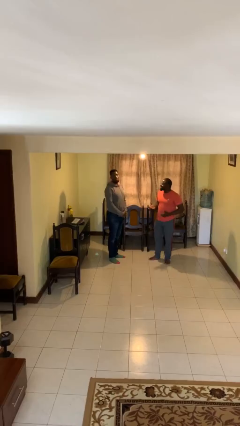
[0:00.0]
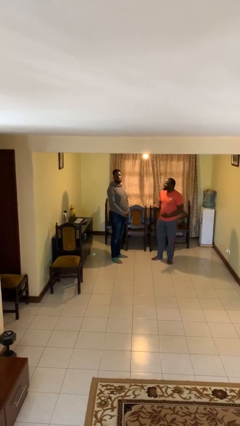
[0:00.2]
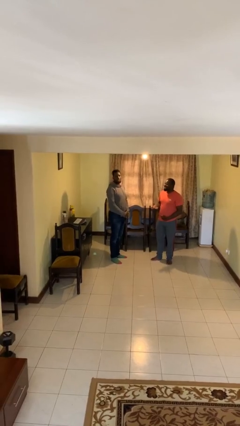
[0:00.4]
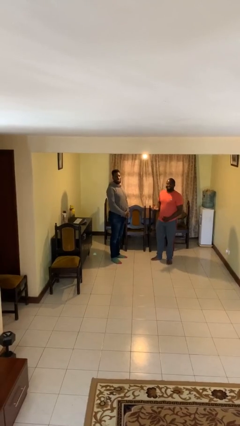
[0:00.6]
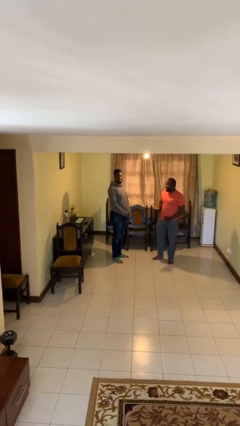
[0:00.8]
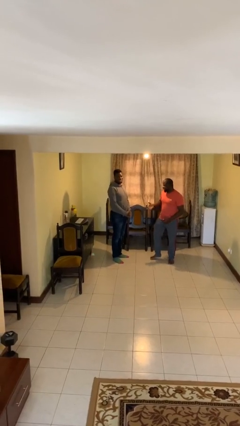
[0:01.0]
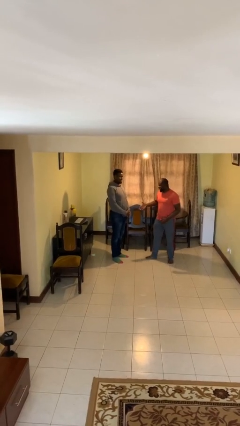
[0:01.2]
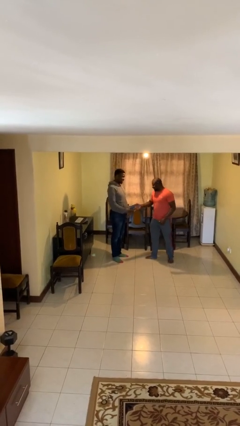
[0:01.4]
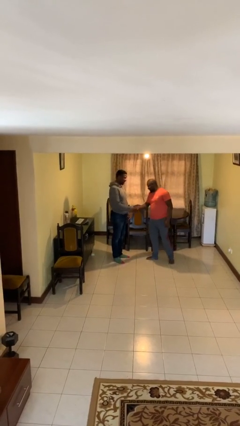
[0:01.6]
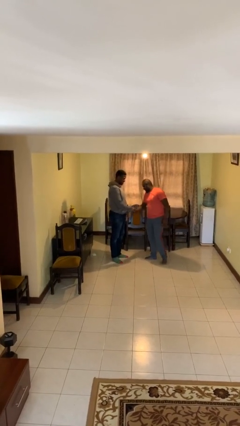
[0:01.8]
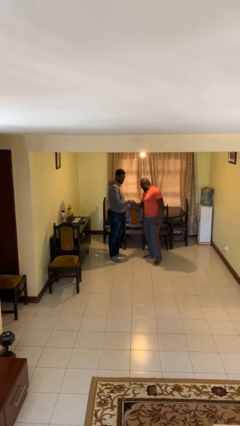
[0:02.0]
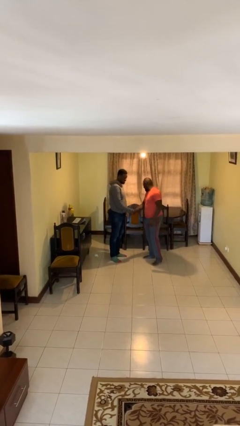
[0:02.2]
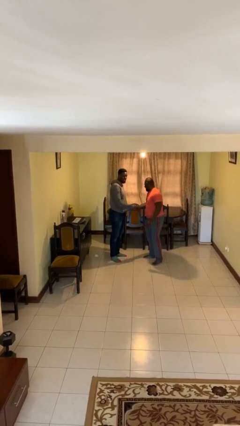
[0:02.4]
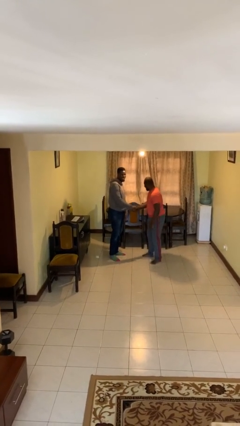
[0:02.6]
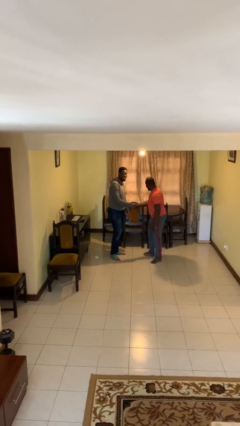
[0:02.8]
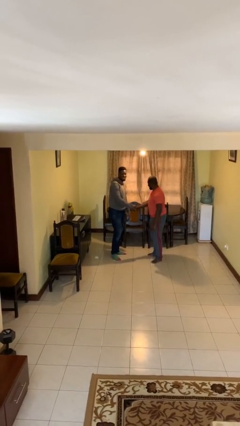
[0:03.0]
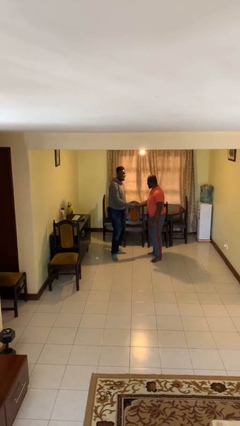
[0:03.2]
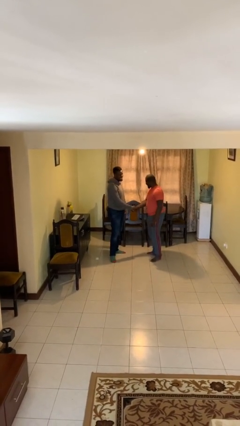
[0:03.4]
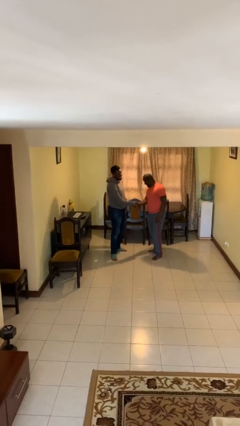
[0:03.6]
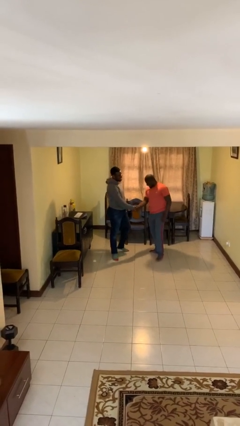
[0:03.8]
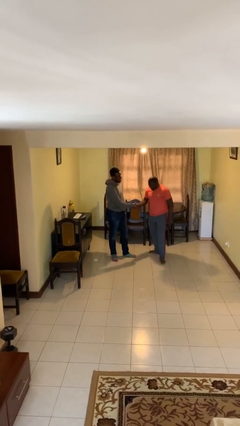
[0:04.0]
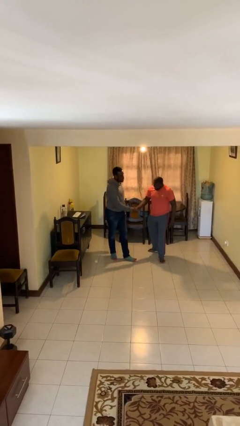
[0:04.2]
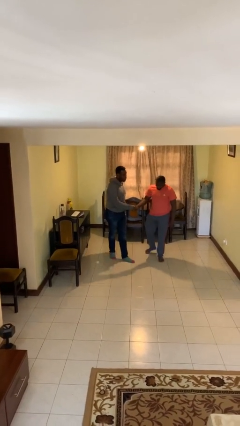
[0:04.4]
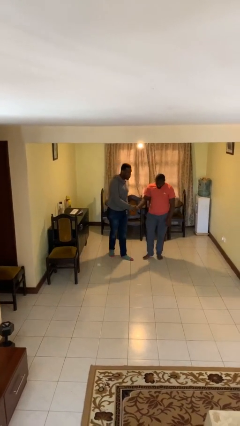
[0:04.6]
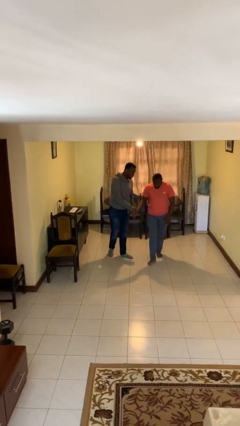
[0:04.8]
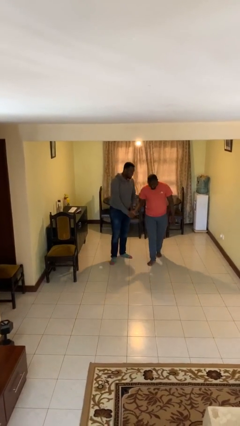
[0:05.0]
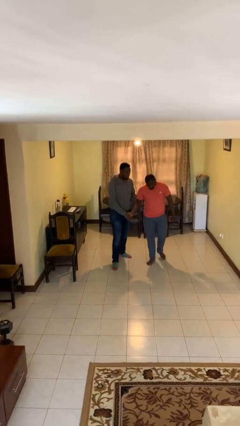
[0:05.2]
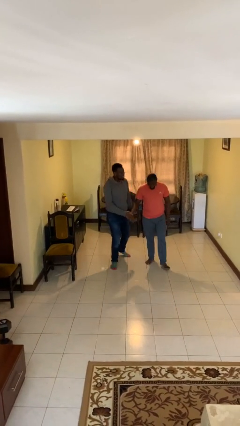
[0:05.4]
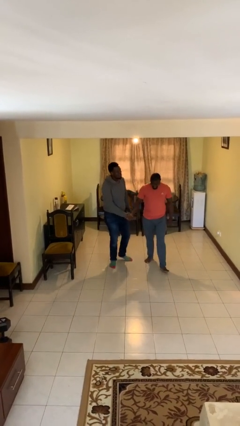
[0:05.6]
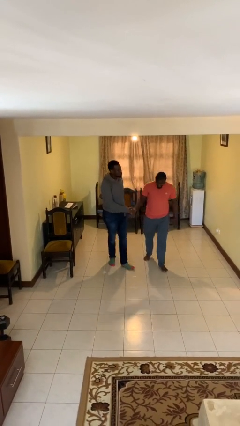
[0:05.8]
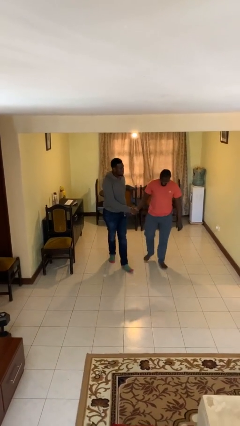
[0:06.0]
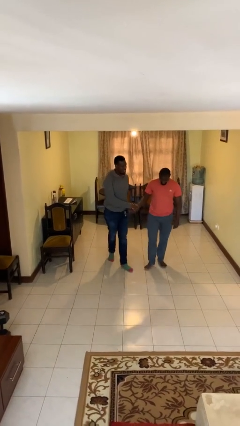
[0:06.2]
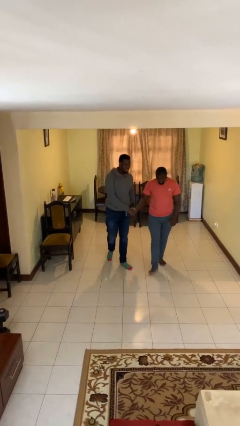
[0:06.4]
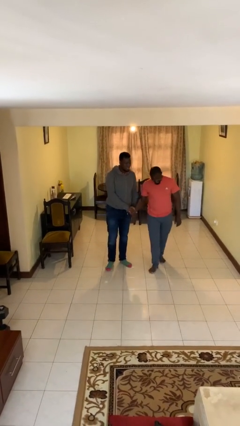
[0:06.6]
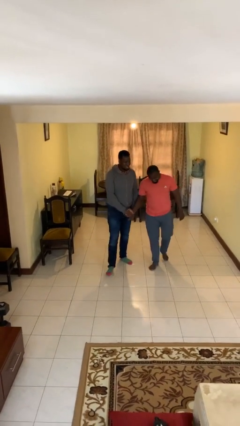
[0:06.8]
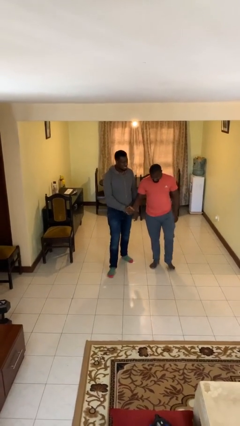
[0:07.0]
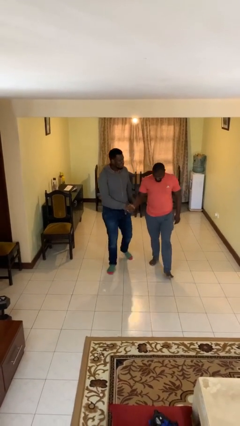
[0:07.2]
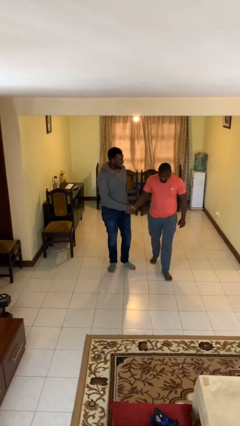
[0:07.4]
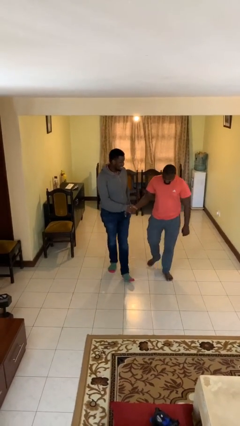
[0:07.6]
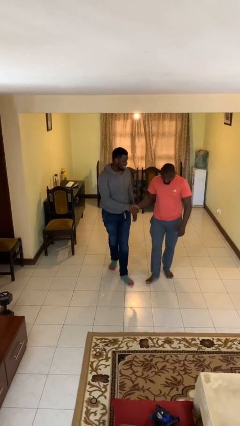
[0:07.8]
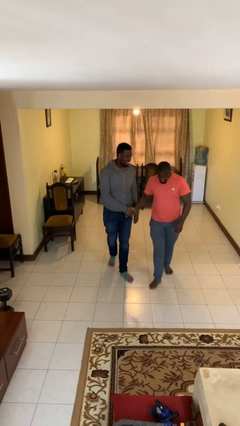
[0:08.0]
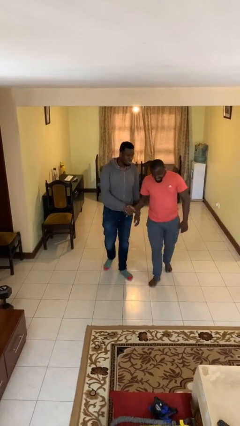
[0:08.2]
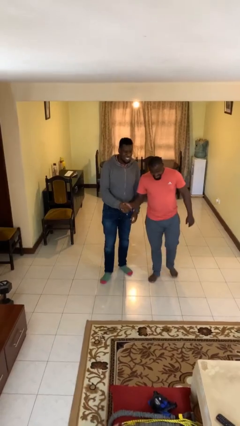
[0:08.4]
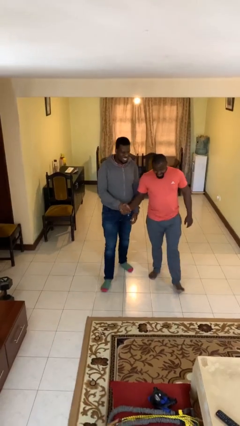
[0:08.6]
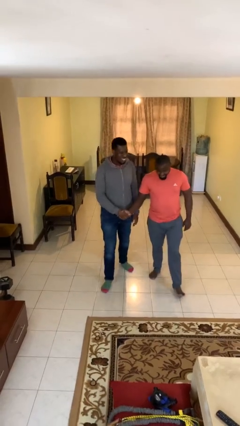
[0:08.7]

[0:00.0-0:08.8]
person holds hand

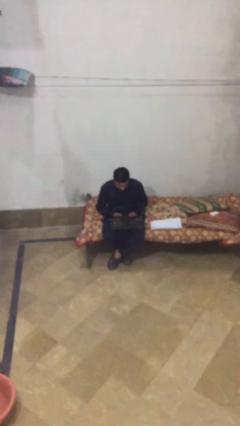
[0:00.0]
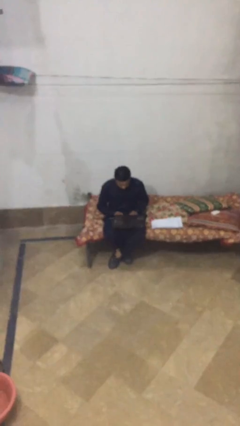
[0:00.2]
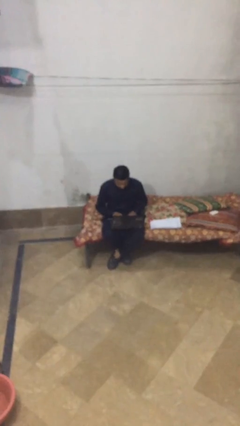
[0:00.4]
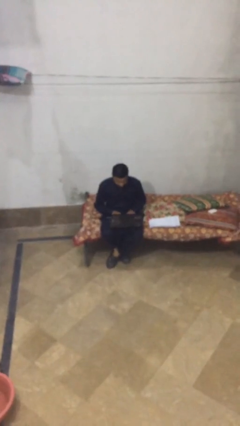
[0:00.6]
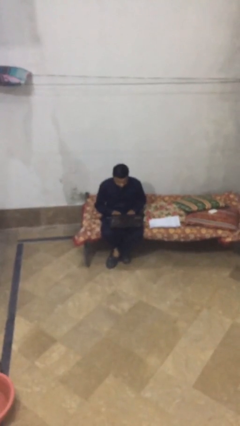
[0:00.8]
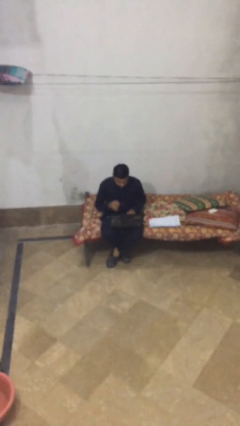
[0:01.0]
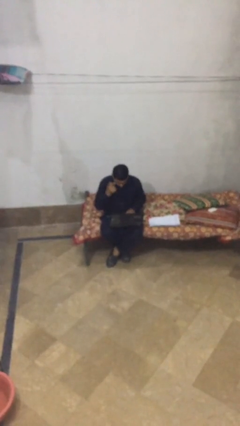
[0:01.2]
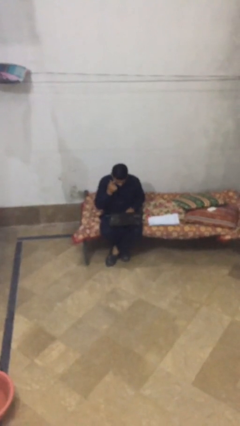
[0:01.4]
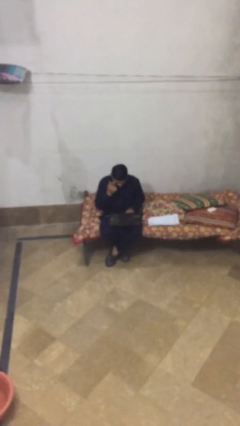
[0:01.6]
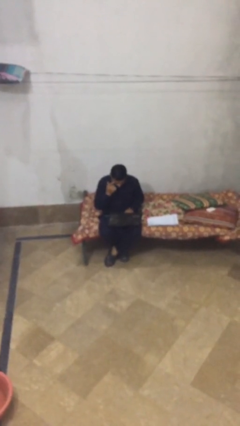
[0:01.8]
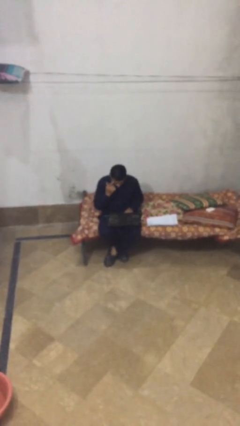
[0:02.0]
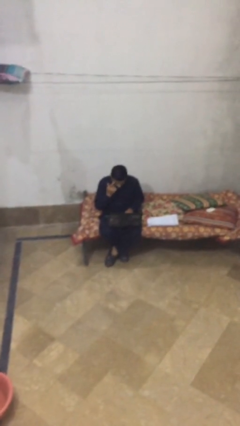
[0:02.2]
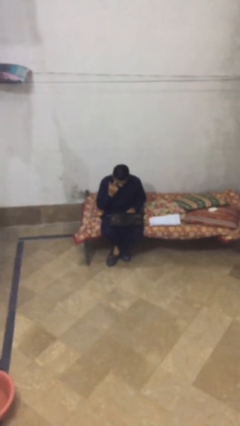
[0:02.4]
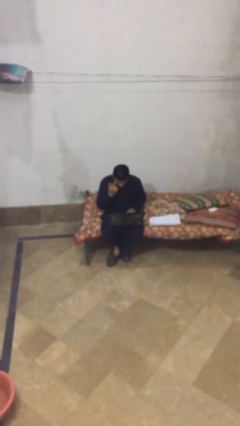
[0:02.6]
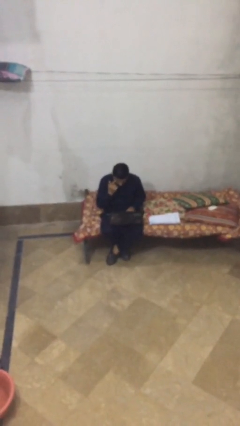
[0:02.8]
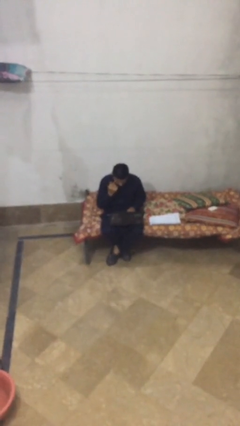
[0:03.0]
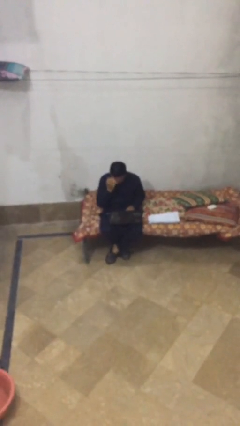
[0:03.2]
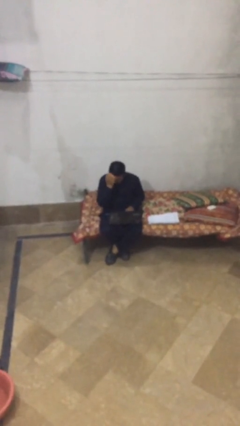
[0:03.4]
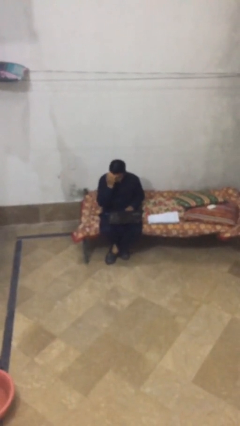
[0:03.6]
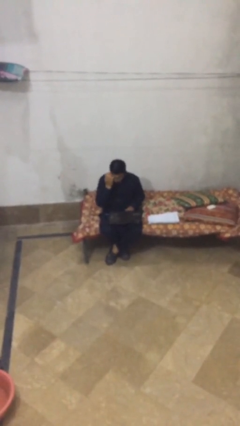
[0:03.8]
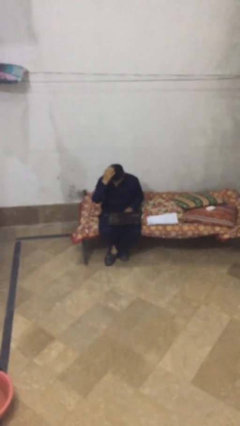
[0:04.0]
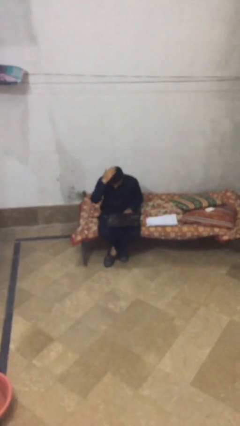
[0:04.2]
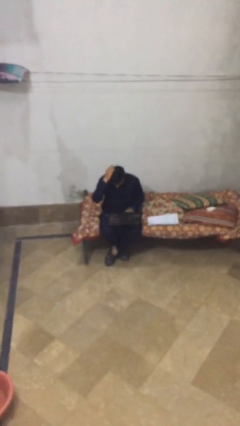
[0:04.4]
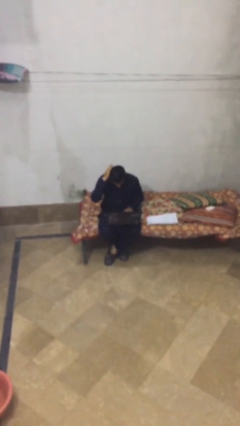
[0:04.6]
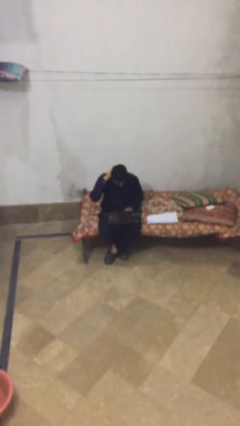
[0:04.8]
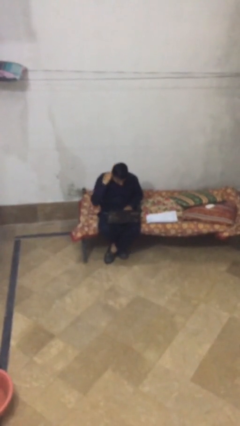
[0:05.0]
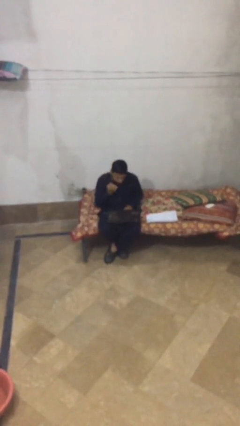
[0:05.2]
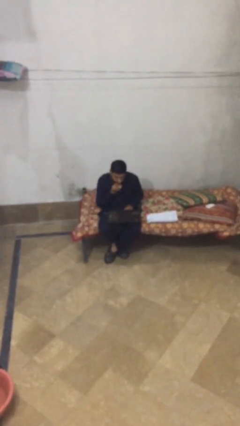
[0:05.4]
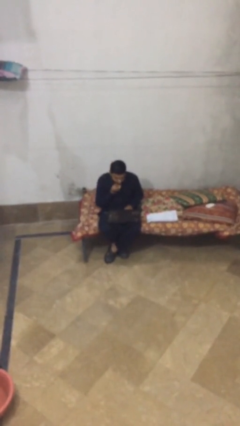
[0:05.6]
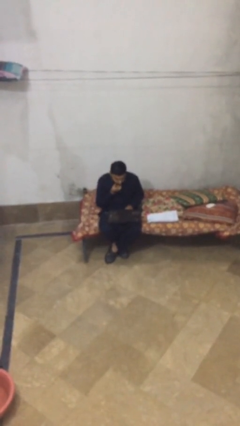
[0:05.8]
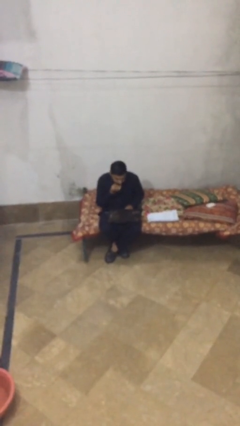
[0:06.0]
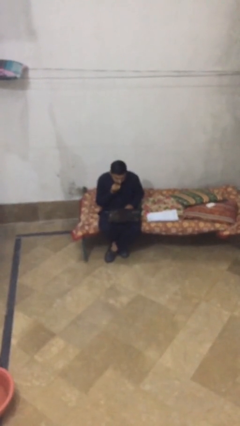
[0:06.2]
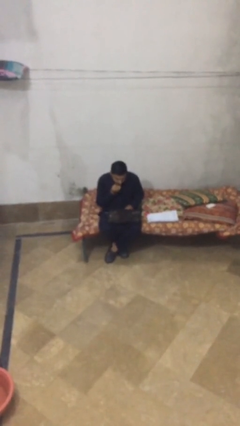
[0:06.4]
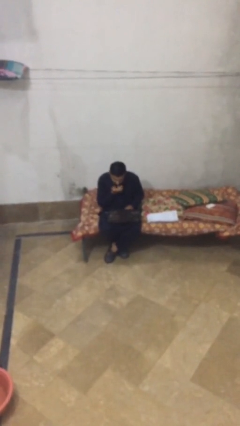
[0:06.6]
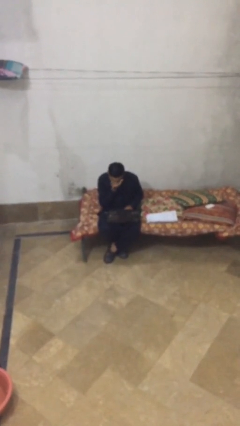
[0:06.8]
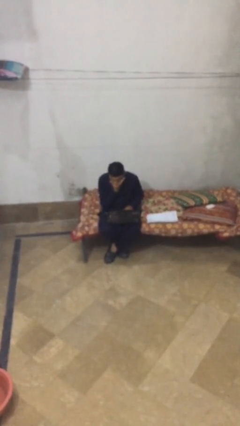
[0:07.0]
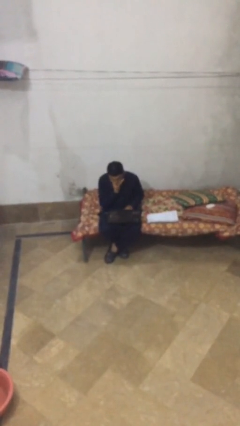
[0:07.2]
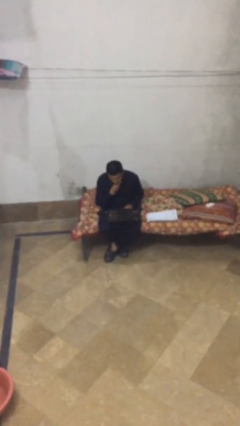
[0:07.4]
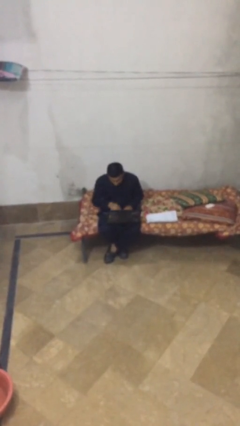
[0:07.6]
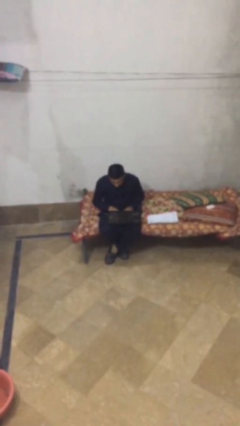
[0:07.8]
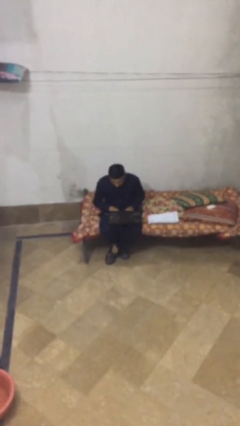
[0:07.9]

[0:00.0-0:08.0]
person interacts with laptop

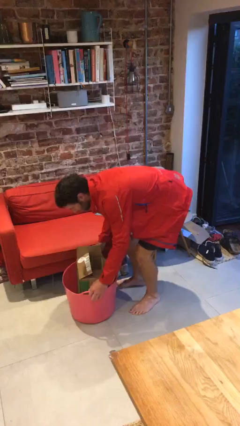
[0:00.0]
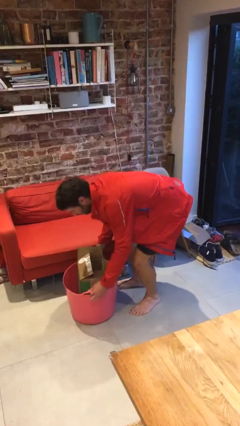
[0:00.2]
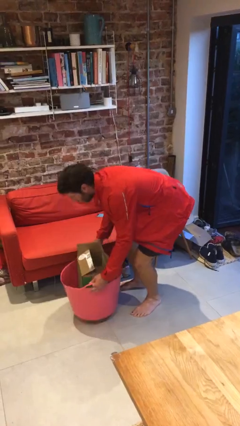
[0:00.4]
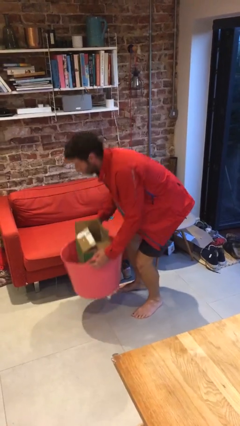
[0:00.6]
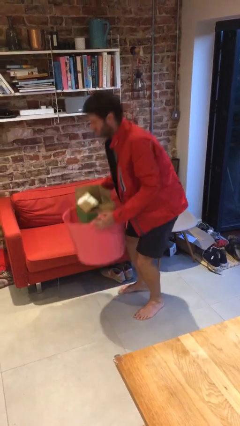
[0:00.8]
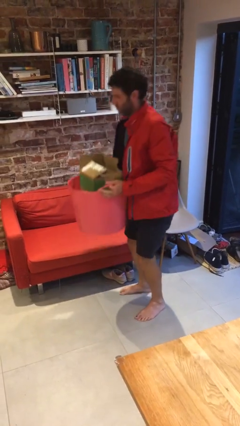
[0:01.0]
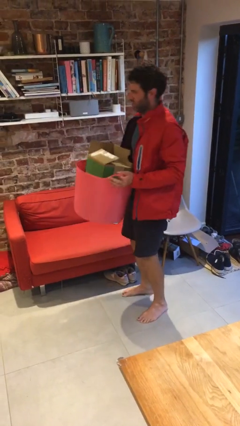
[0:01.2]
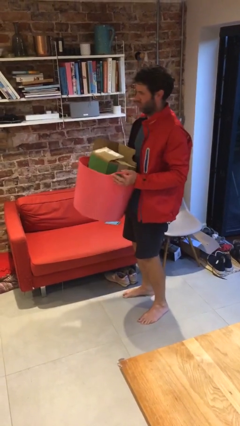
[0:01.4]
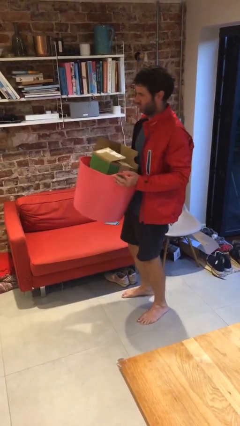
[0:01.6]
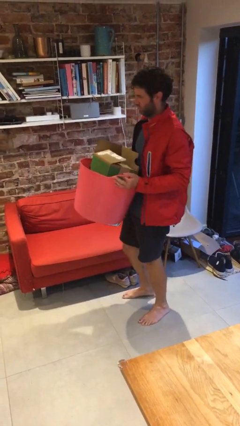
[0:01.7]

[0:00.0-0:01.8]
person picks up object from floor
